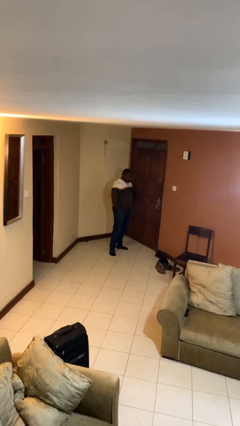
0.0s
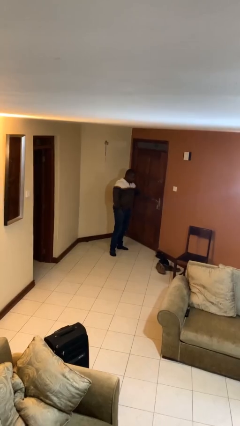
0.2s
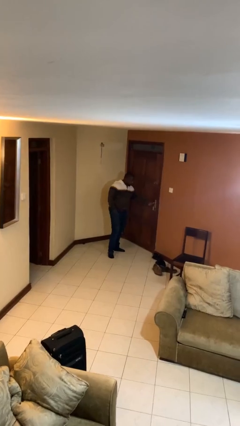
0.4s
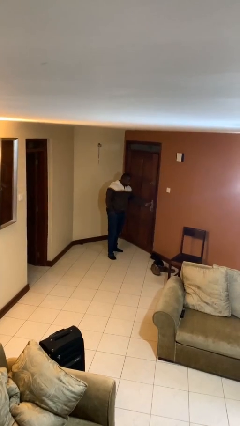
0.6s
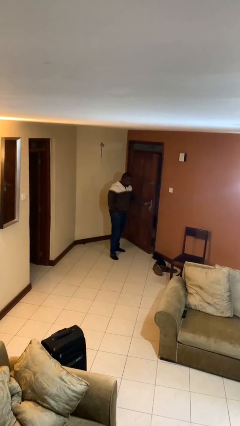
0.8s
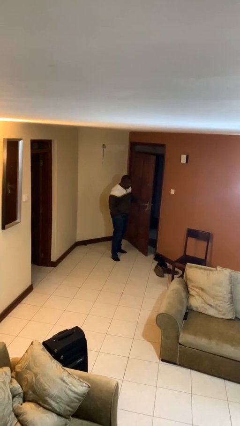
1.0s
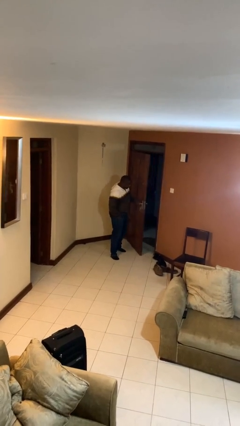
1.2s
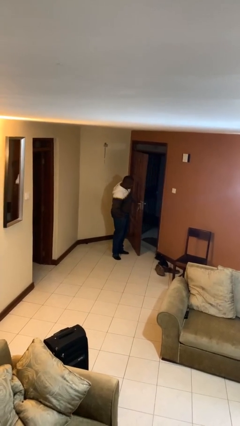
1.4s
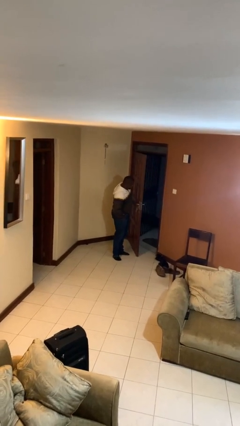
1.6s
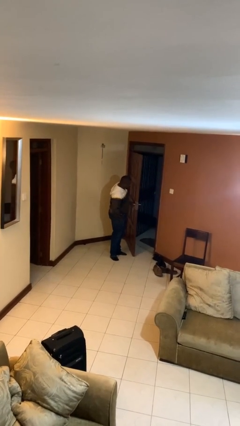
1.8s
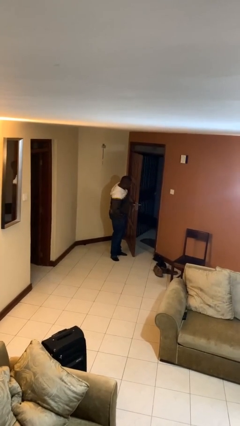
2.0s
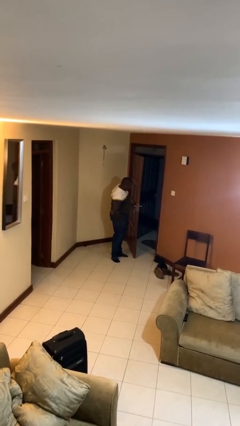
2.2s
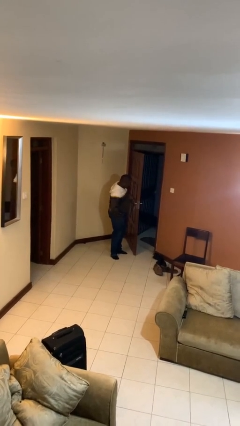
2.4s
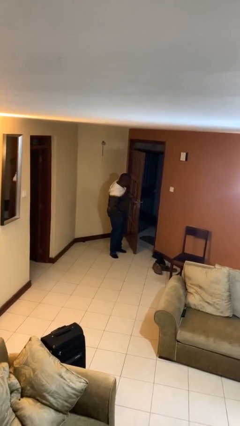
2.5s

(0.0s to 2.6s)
person opens facility door

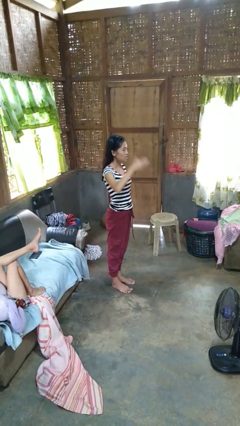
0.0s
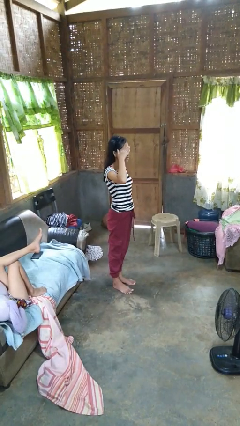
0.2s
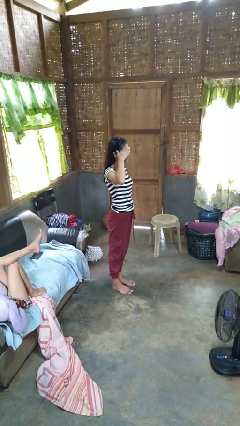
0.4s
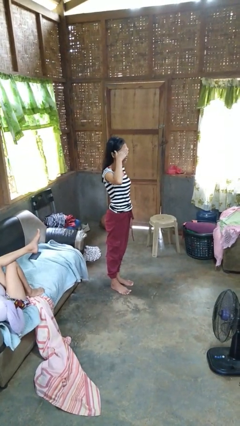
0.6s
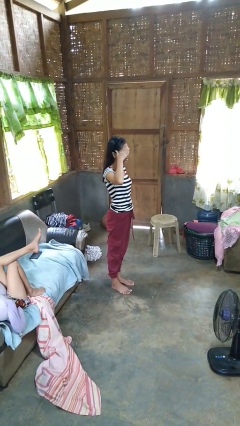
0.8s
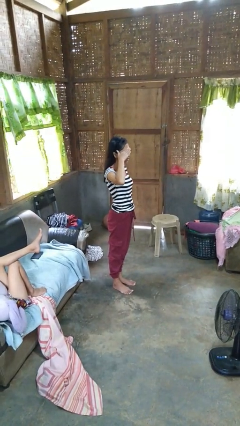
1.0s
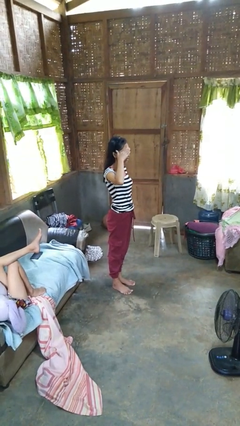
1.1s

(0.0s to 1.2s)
person salutes

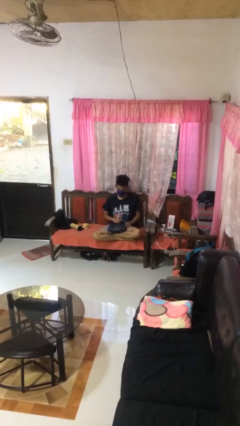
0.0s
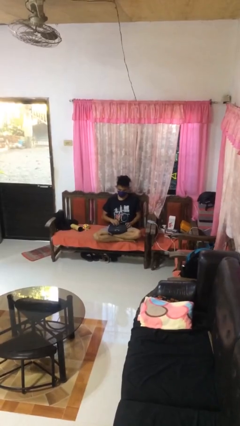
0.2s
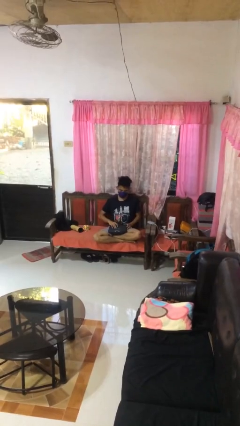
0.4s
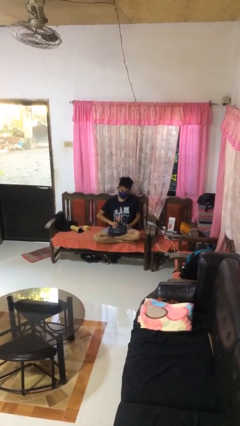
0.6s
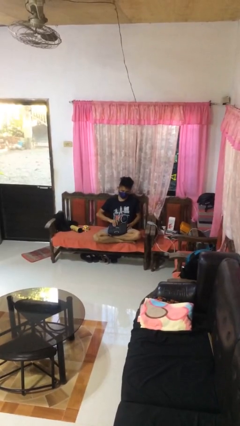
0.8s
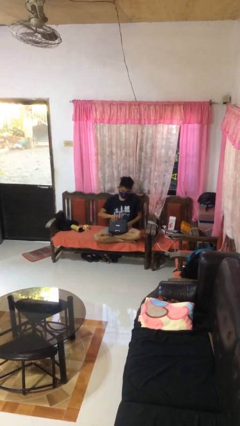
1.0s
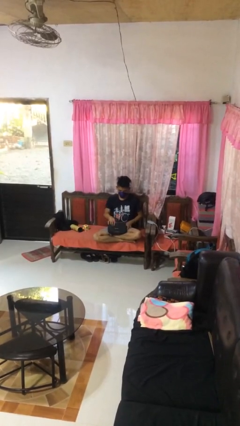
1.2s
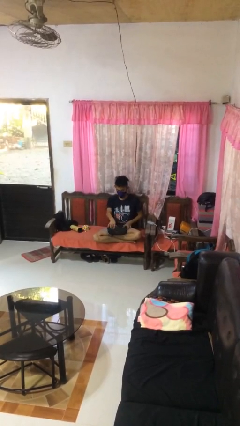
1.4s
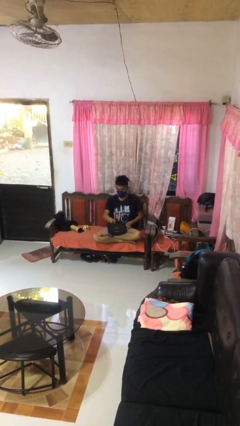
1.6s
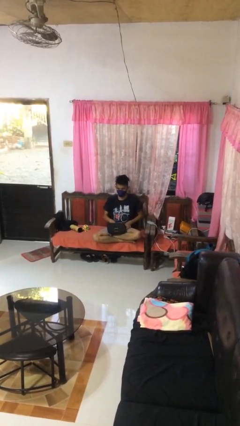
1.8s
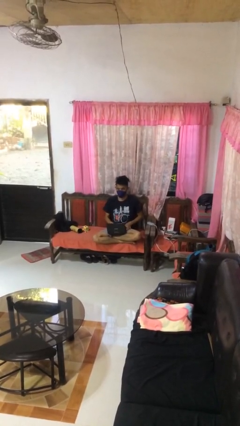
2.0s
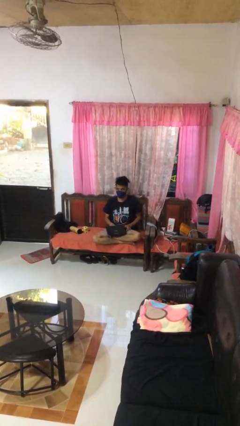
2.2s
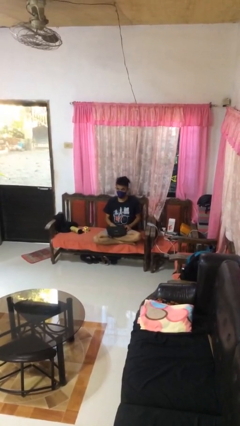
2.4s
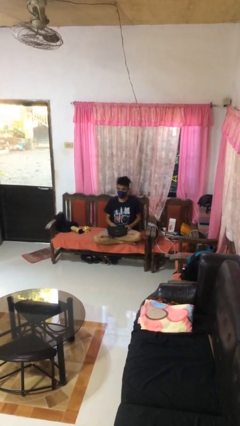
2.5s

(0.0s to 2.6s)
person opens laptop

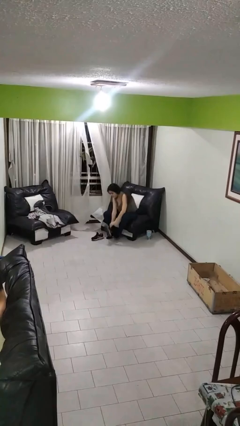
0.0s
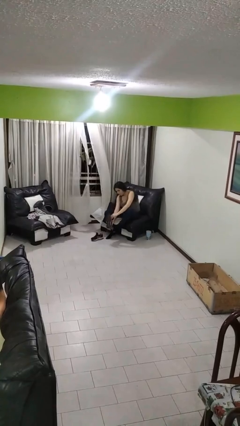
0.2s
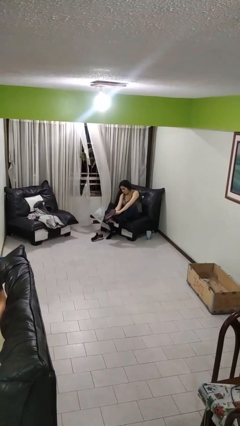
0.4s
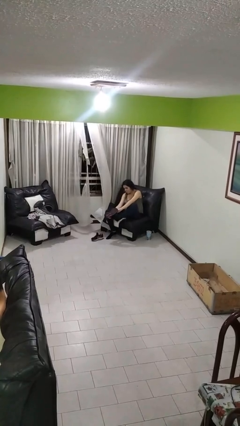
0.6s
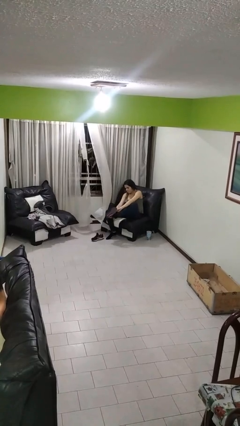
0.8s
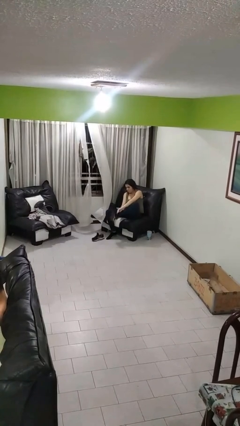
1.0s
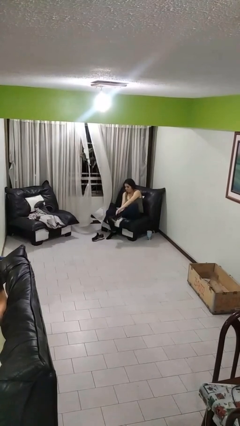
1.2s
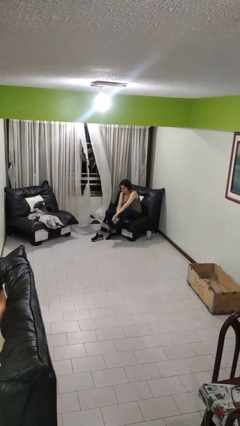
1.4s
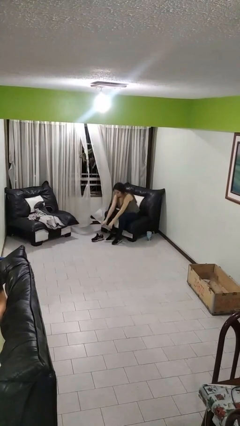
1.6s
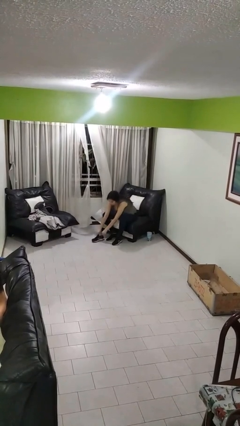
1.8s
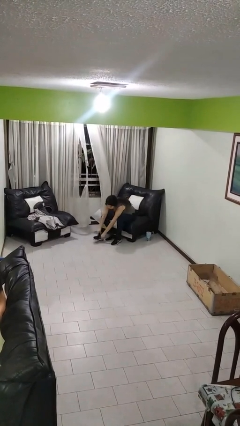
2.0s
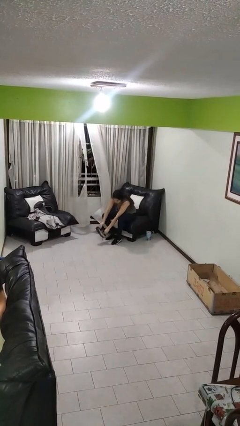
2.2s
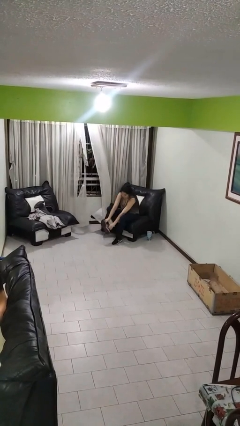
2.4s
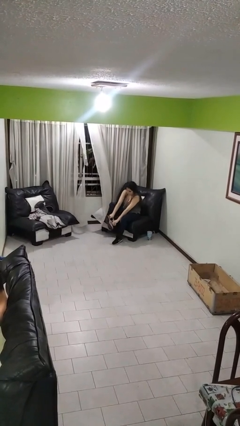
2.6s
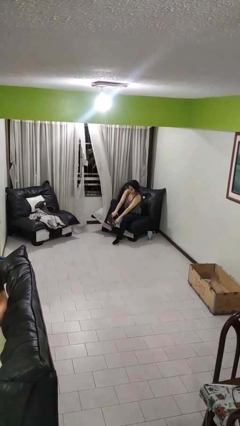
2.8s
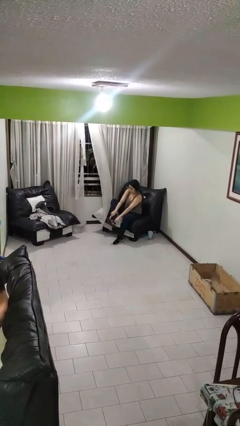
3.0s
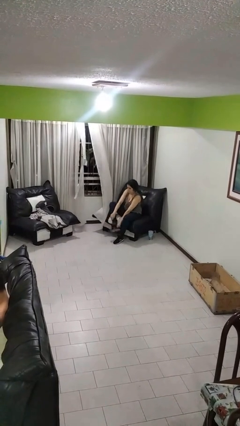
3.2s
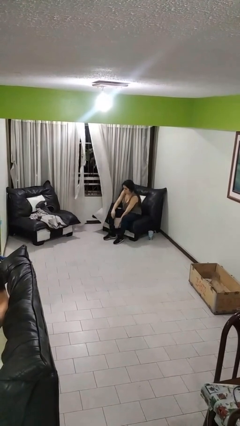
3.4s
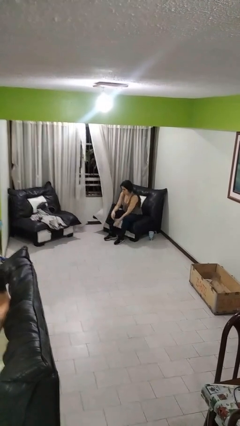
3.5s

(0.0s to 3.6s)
person puts on shoes

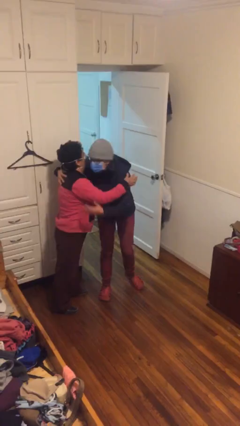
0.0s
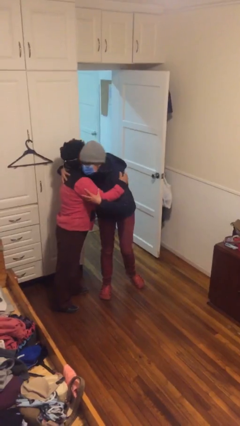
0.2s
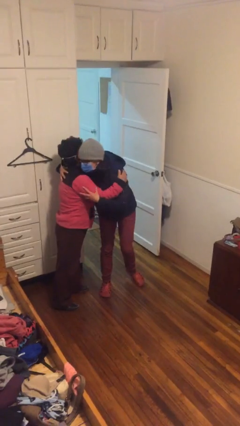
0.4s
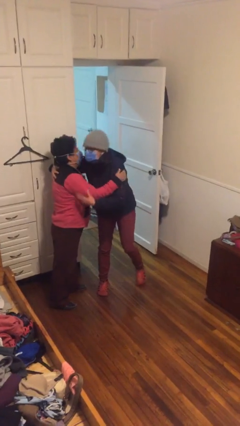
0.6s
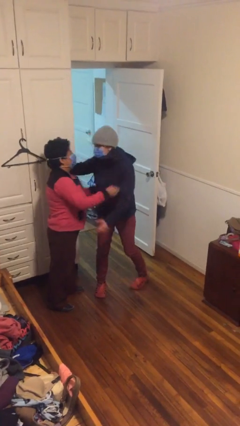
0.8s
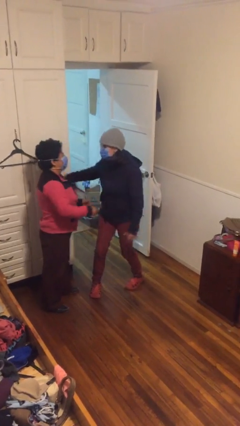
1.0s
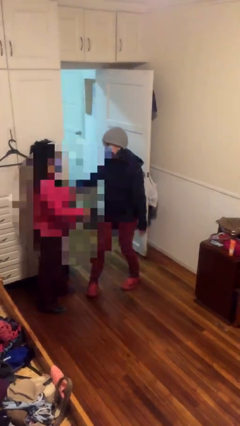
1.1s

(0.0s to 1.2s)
person embraces person

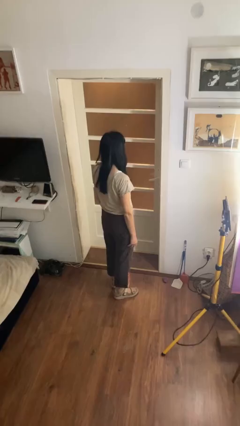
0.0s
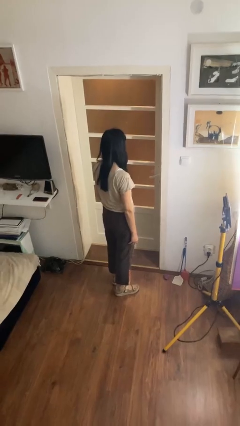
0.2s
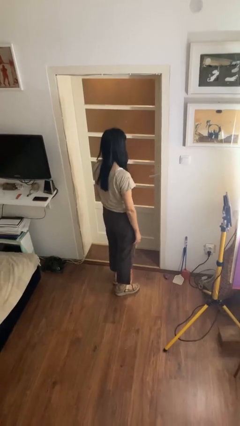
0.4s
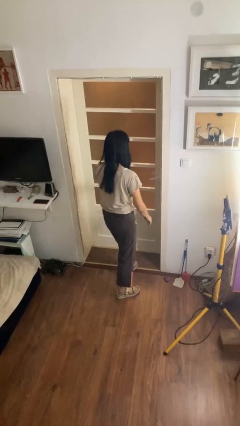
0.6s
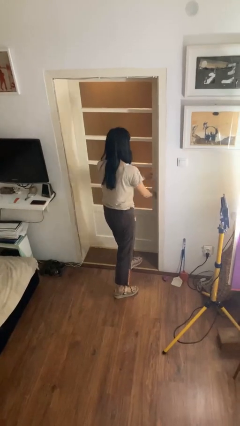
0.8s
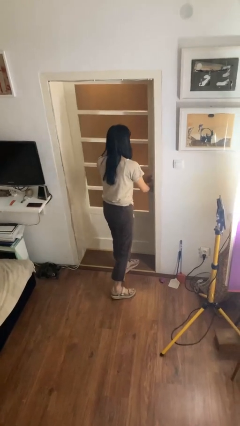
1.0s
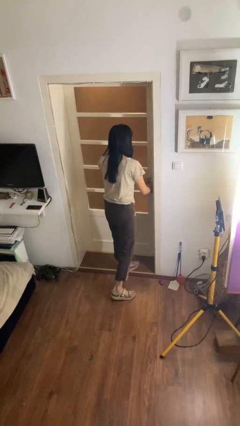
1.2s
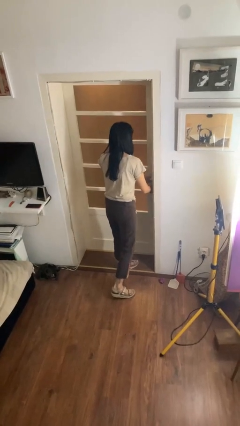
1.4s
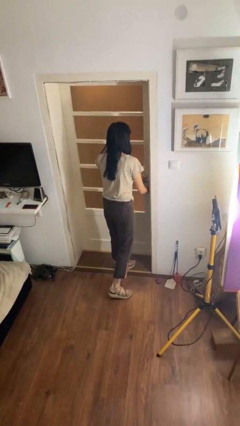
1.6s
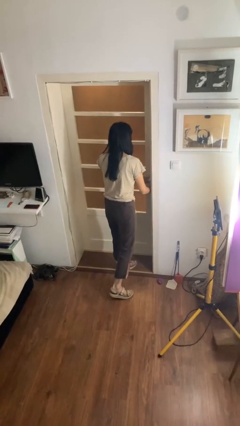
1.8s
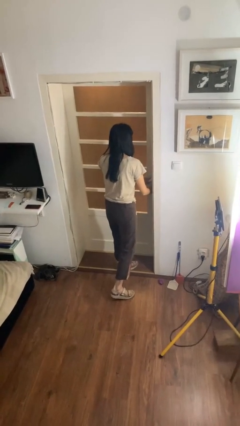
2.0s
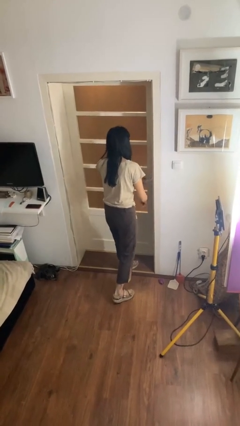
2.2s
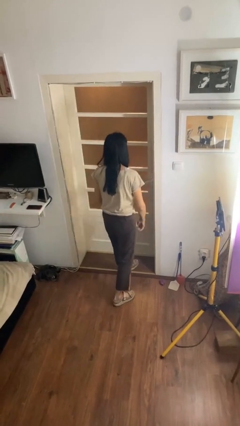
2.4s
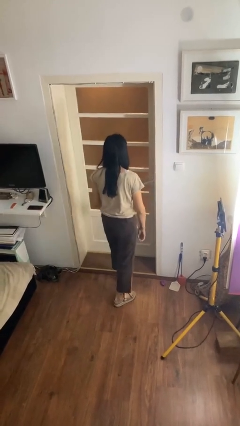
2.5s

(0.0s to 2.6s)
person locks door with keys

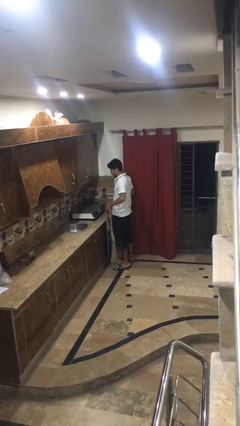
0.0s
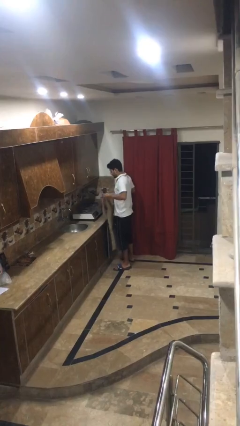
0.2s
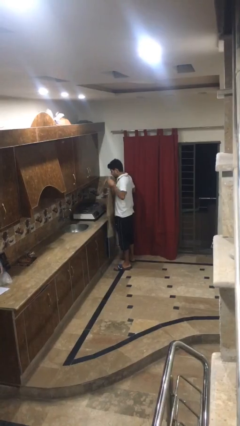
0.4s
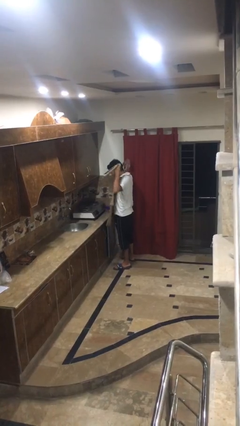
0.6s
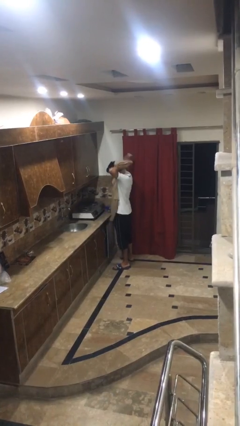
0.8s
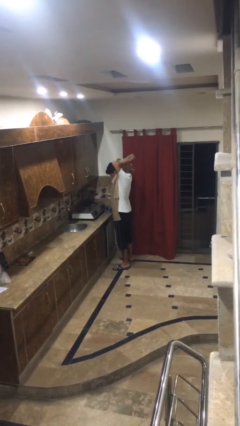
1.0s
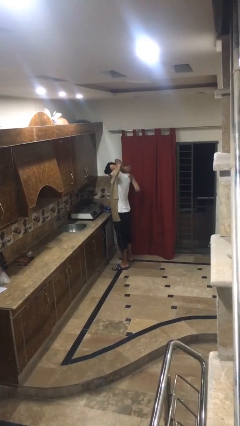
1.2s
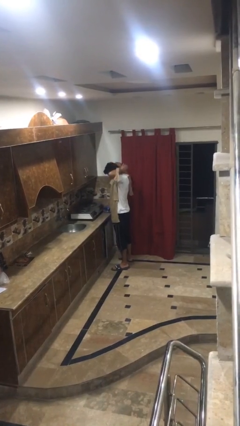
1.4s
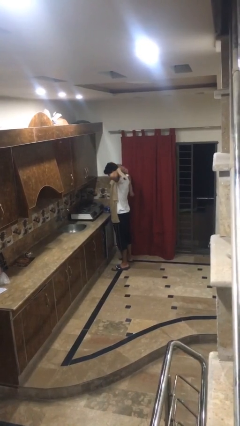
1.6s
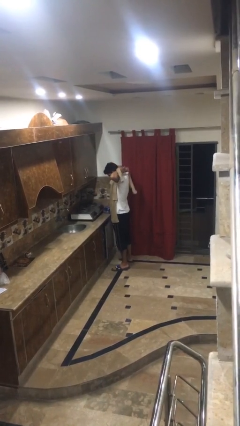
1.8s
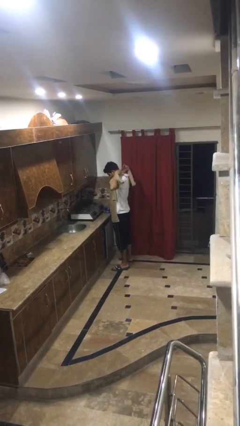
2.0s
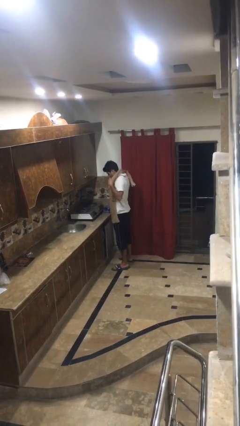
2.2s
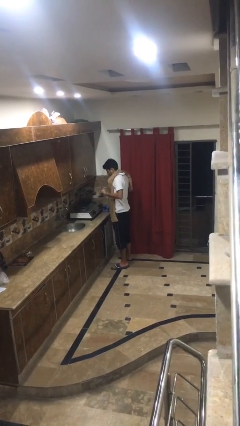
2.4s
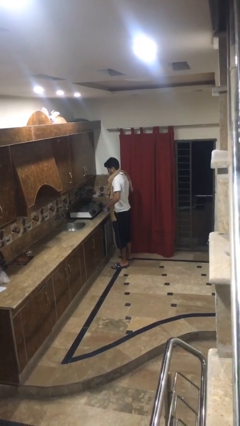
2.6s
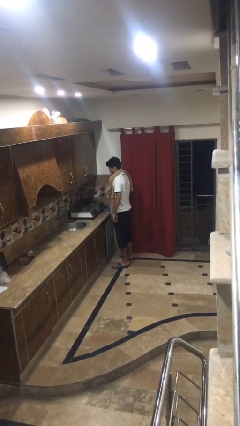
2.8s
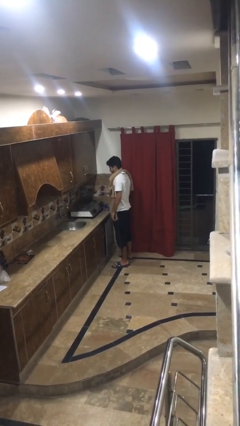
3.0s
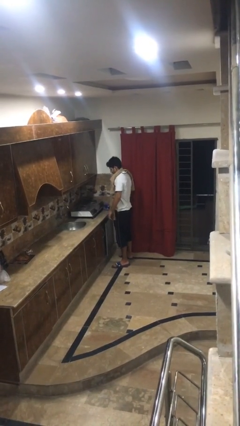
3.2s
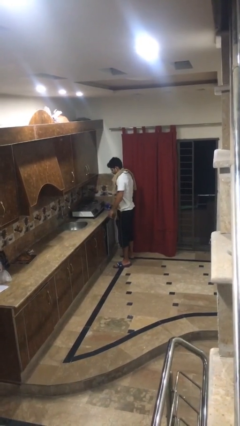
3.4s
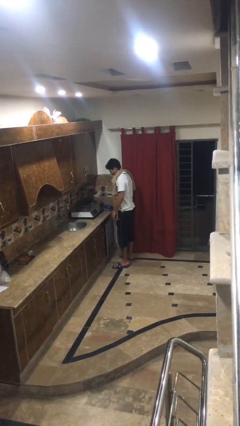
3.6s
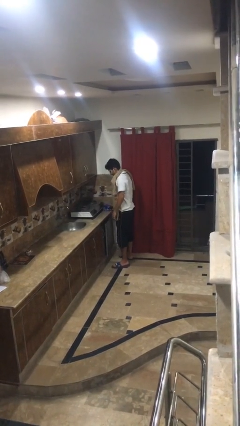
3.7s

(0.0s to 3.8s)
person puts on apron
